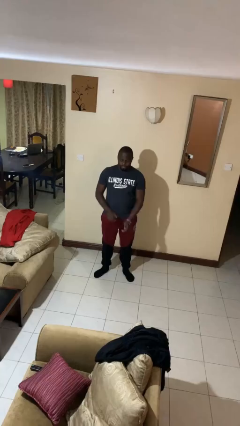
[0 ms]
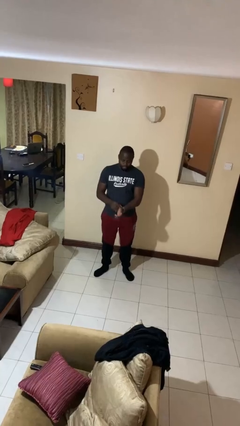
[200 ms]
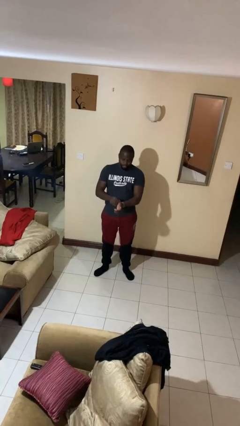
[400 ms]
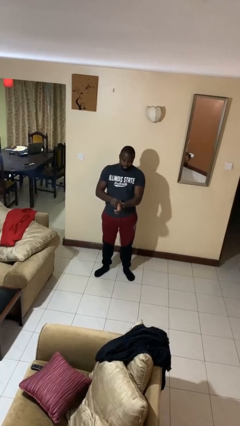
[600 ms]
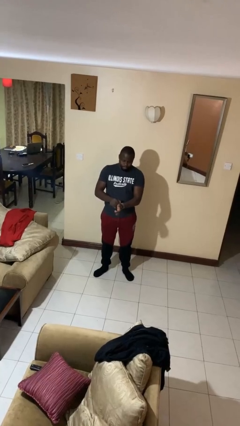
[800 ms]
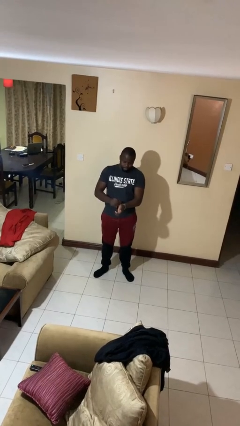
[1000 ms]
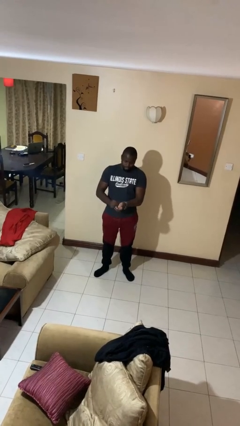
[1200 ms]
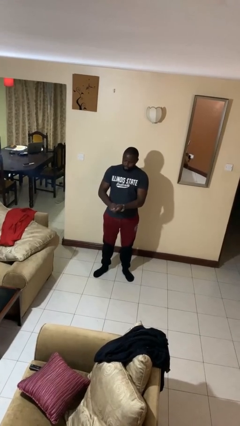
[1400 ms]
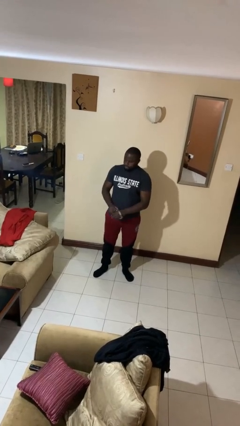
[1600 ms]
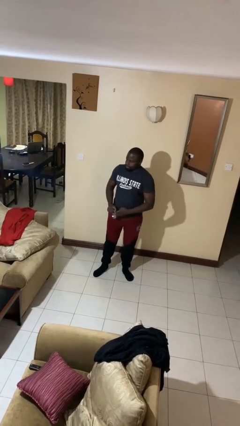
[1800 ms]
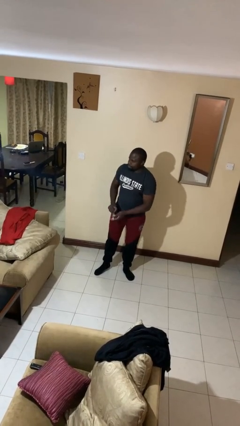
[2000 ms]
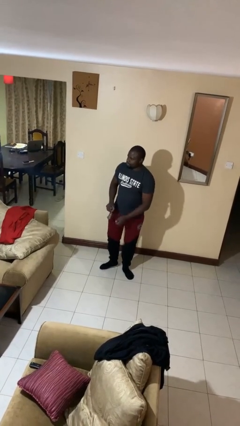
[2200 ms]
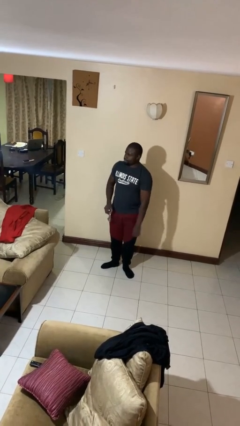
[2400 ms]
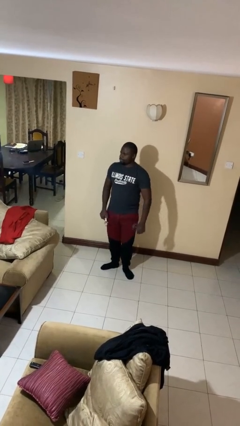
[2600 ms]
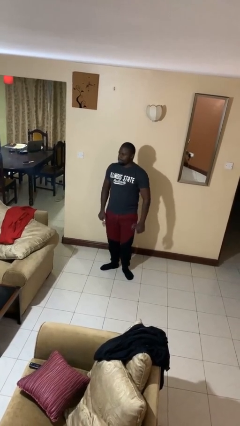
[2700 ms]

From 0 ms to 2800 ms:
person takes off wristwatch

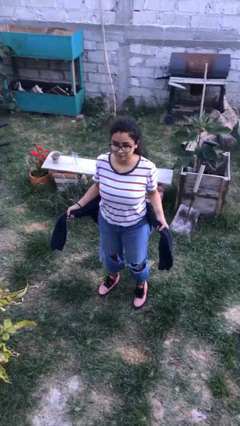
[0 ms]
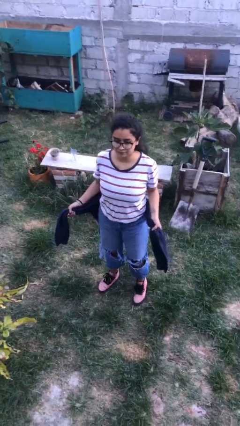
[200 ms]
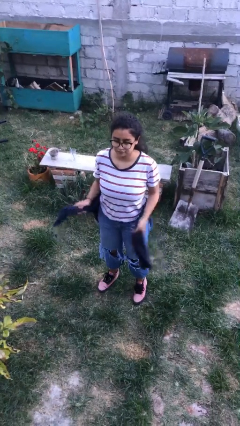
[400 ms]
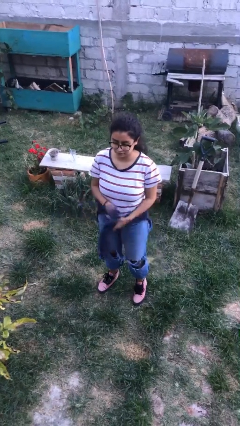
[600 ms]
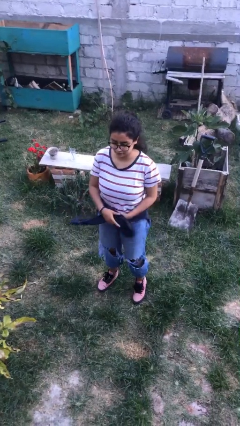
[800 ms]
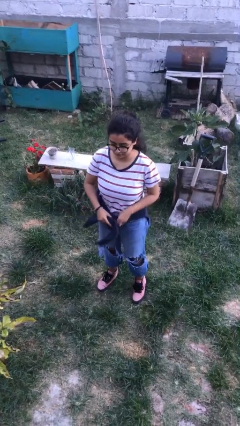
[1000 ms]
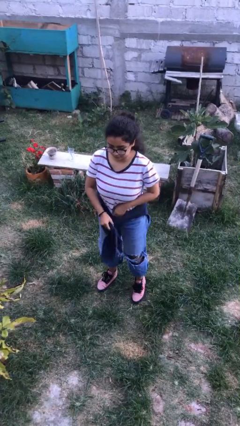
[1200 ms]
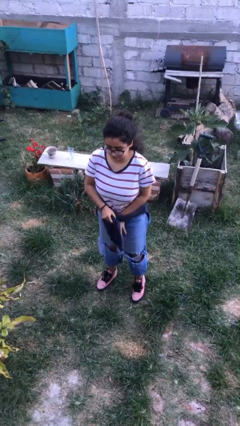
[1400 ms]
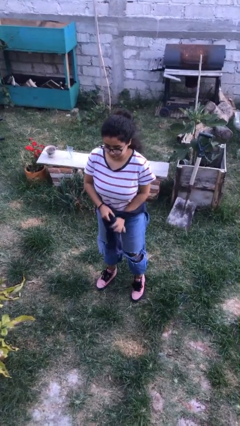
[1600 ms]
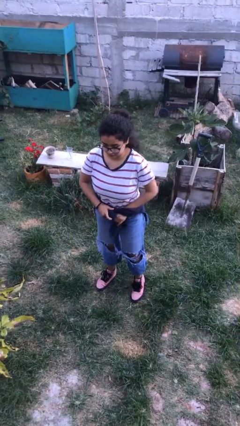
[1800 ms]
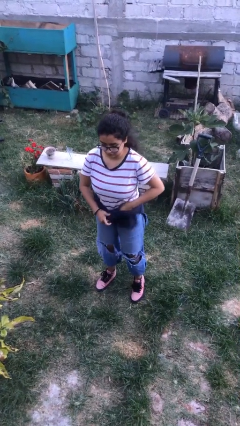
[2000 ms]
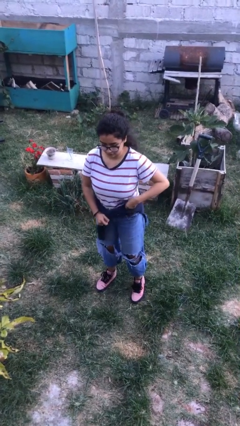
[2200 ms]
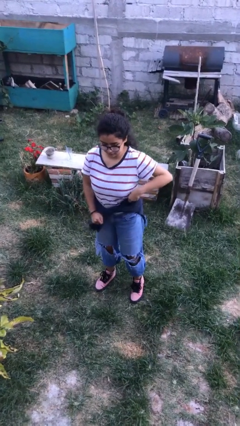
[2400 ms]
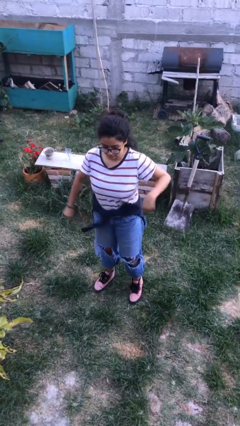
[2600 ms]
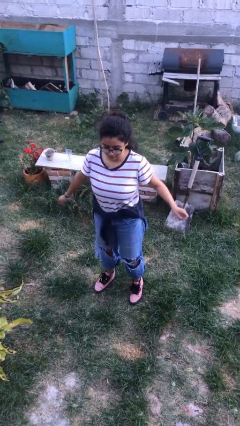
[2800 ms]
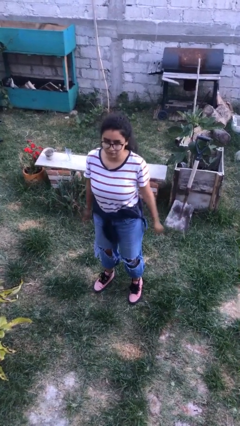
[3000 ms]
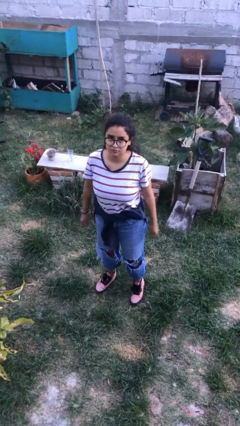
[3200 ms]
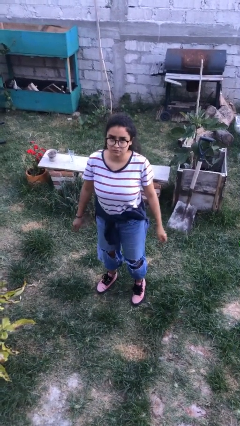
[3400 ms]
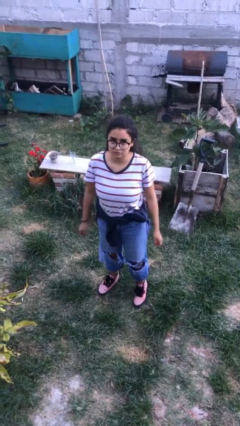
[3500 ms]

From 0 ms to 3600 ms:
person ties jacket around waist

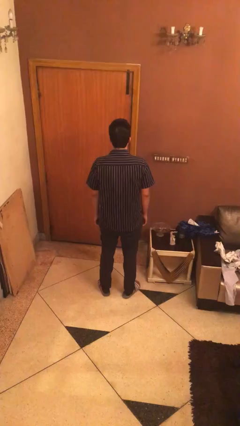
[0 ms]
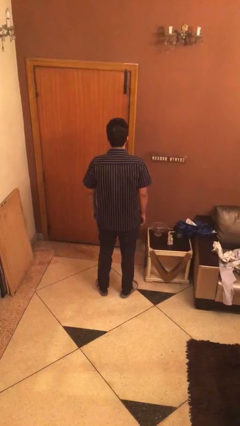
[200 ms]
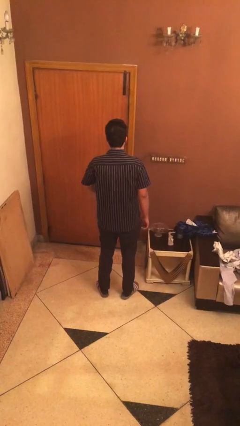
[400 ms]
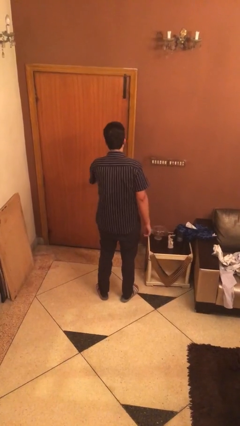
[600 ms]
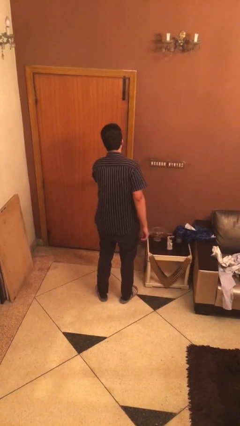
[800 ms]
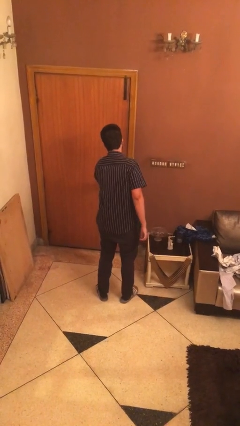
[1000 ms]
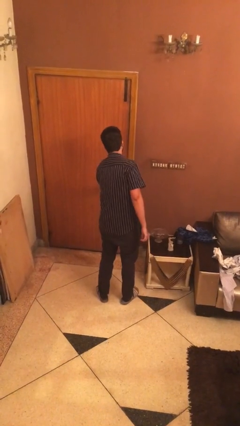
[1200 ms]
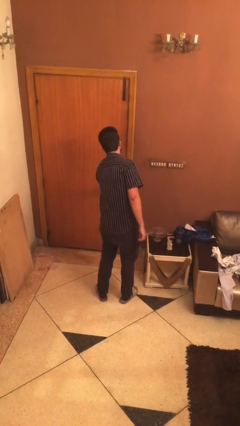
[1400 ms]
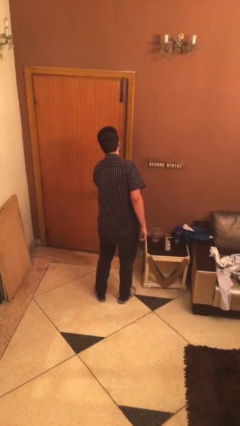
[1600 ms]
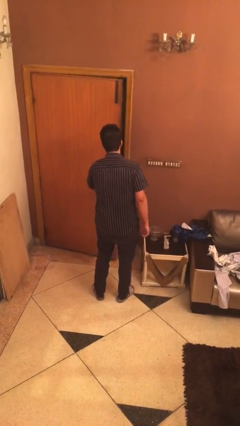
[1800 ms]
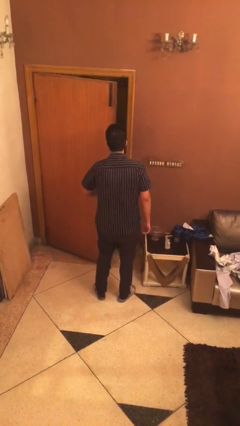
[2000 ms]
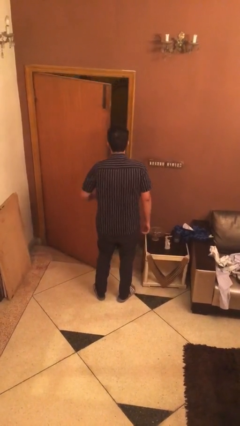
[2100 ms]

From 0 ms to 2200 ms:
person opens facility door

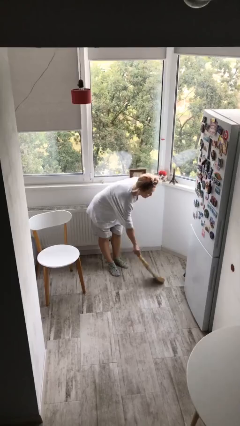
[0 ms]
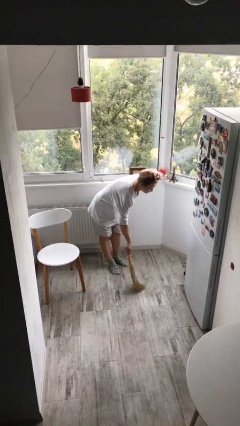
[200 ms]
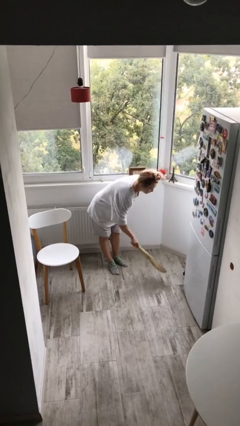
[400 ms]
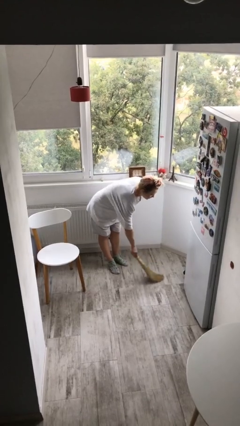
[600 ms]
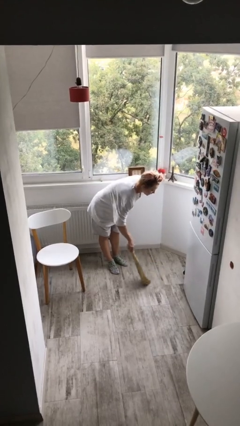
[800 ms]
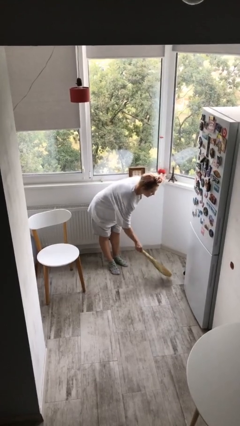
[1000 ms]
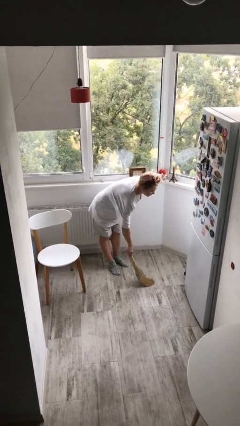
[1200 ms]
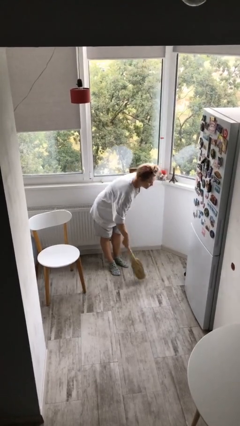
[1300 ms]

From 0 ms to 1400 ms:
person sweeps floor

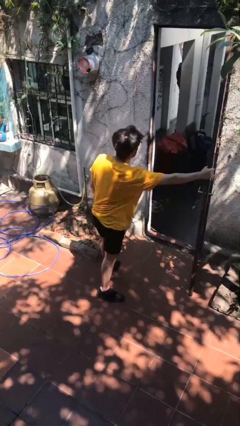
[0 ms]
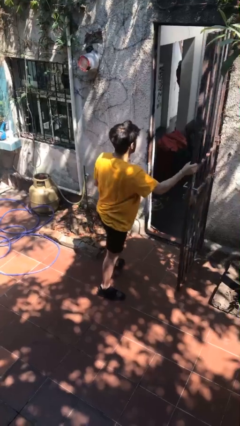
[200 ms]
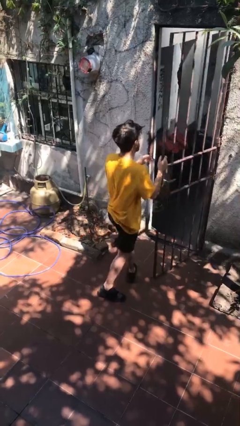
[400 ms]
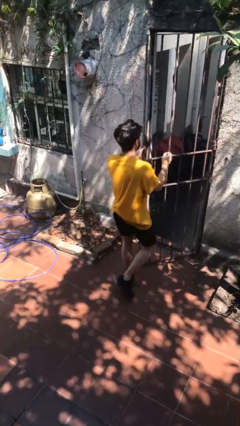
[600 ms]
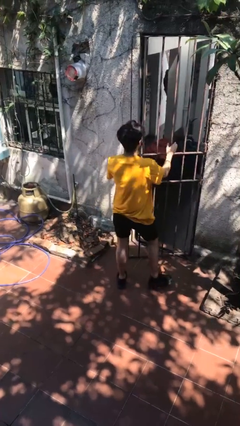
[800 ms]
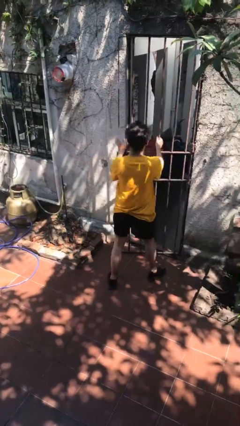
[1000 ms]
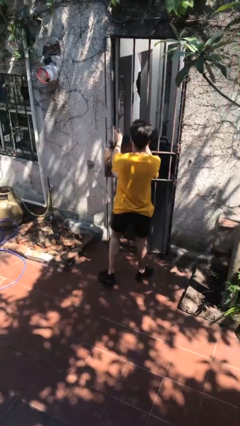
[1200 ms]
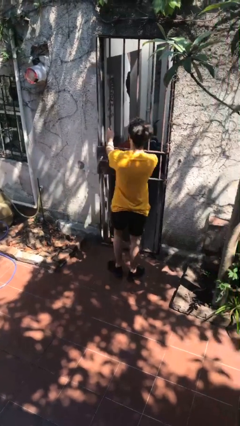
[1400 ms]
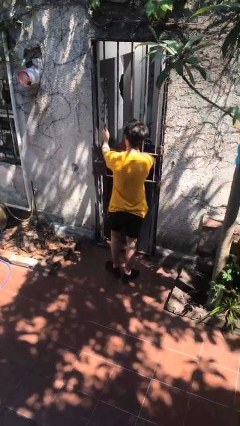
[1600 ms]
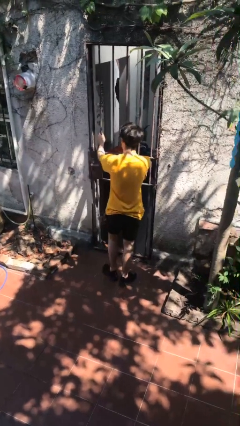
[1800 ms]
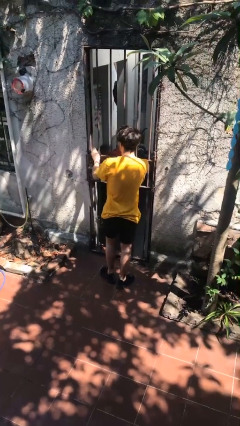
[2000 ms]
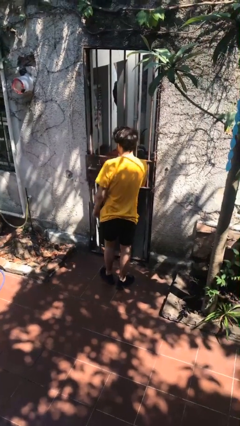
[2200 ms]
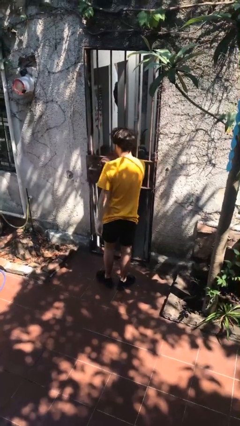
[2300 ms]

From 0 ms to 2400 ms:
person closes facility door

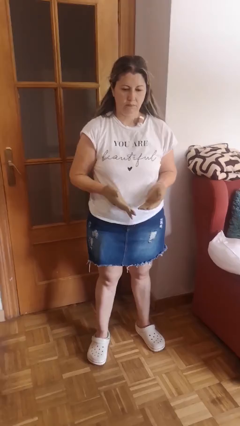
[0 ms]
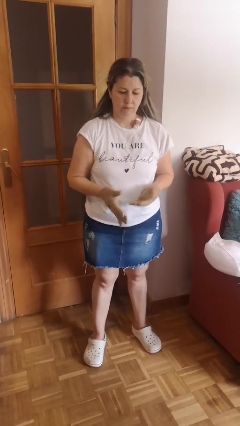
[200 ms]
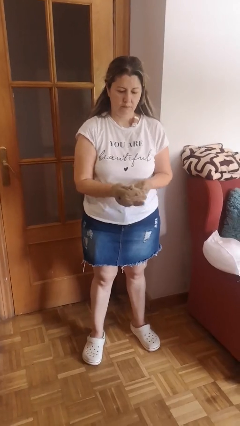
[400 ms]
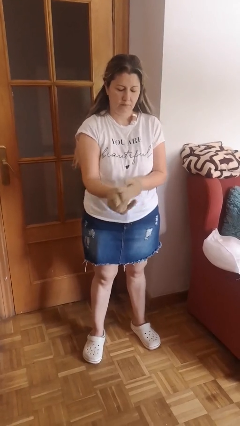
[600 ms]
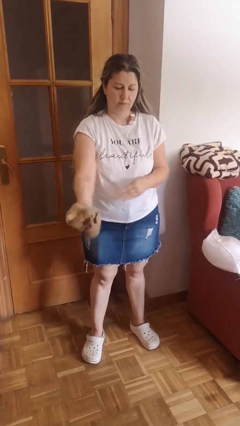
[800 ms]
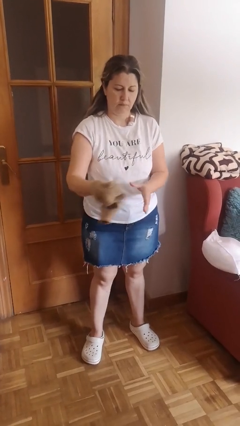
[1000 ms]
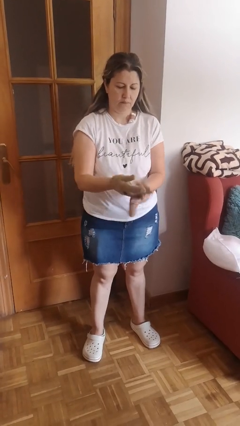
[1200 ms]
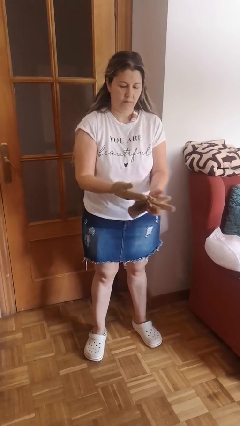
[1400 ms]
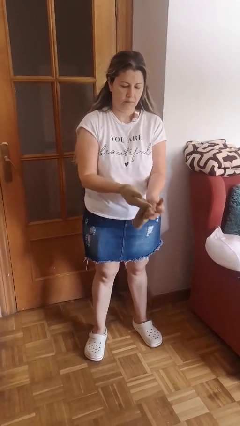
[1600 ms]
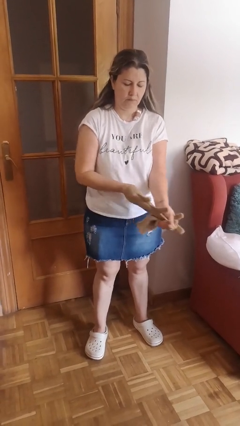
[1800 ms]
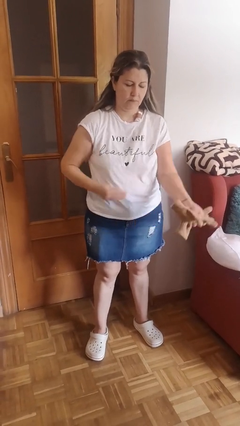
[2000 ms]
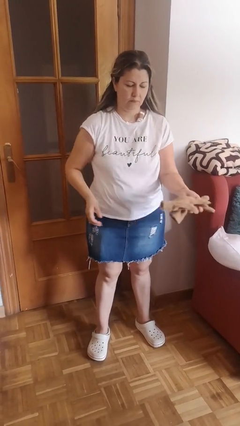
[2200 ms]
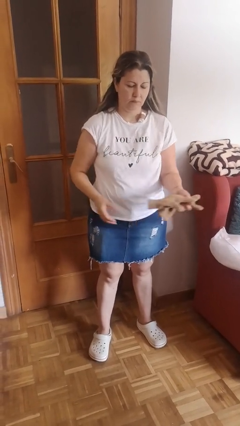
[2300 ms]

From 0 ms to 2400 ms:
person takes off gloves

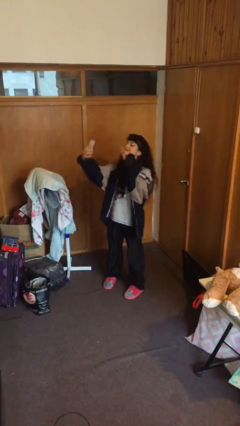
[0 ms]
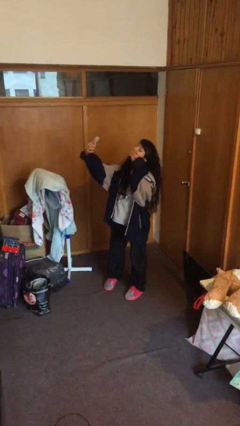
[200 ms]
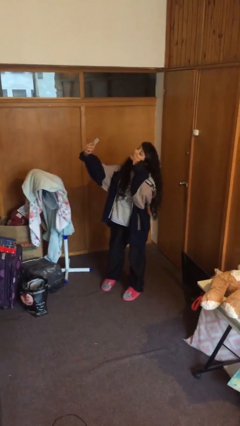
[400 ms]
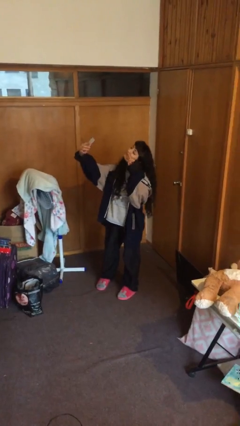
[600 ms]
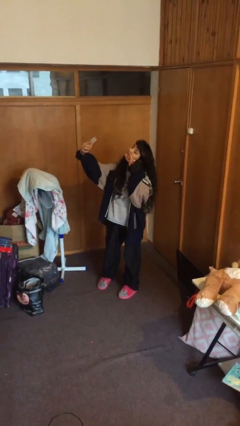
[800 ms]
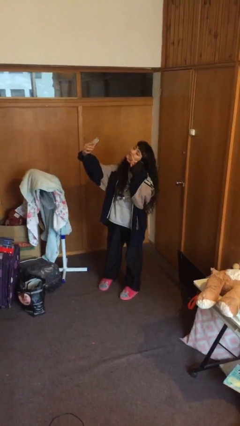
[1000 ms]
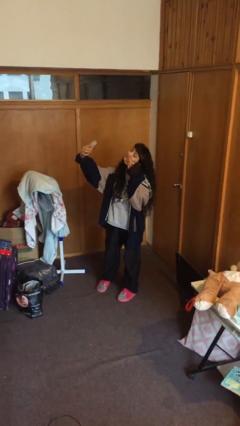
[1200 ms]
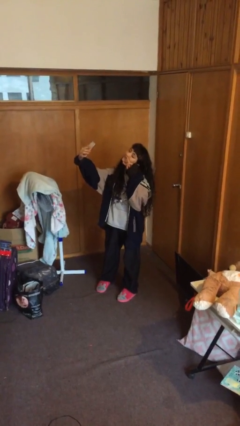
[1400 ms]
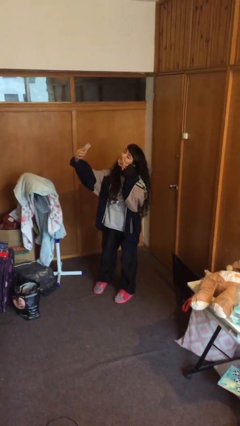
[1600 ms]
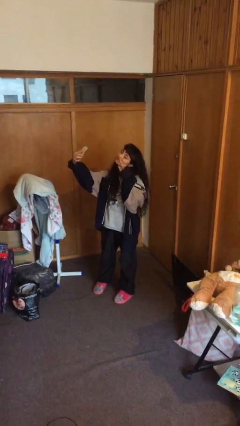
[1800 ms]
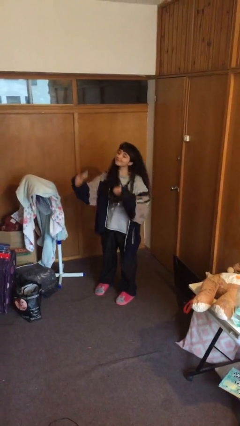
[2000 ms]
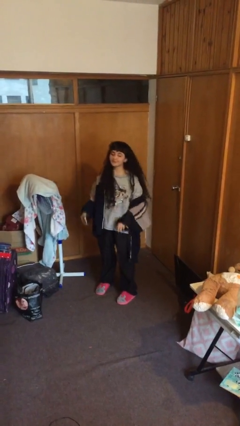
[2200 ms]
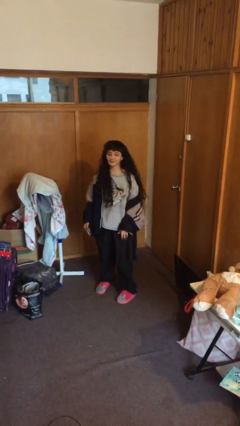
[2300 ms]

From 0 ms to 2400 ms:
person takes selfie
